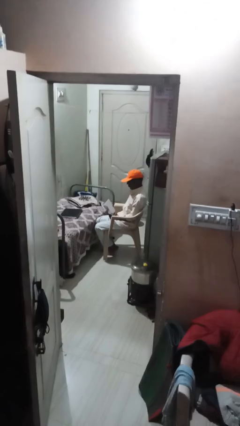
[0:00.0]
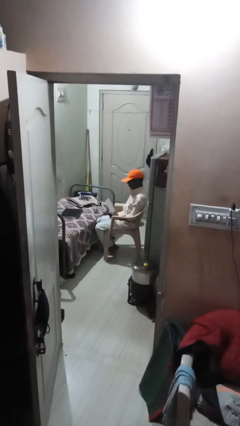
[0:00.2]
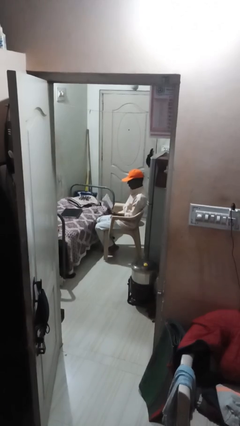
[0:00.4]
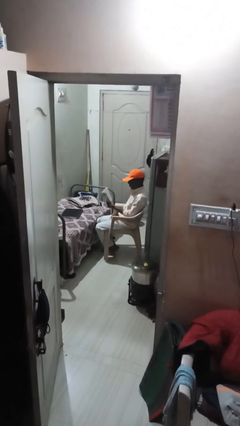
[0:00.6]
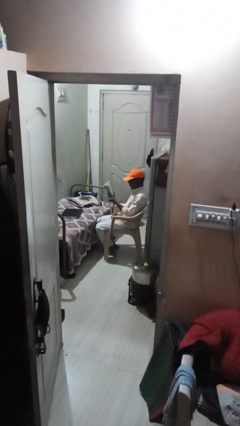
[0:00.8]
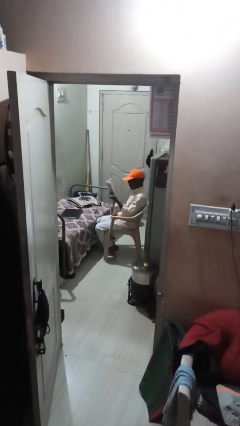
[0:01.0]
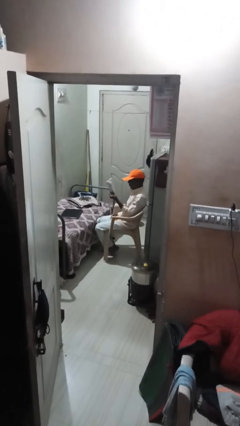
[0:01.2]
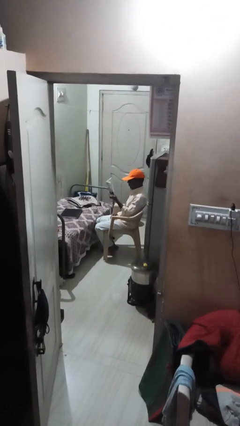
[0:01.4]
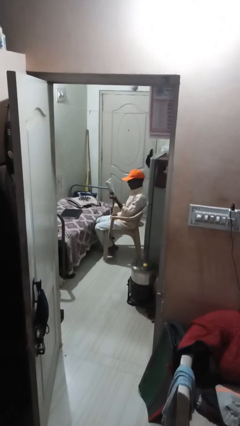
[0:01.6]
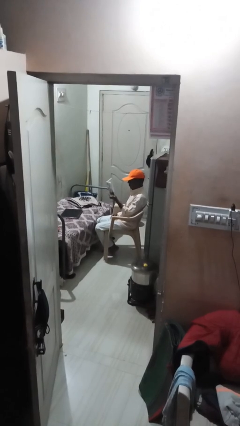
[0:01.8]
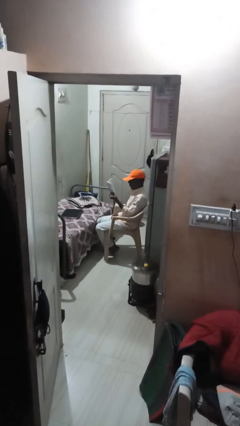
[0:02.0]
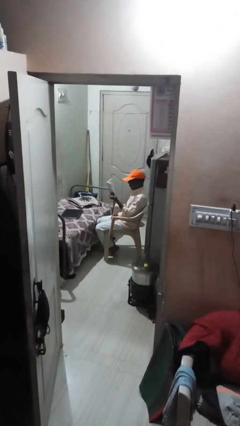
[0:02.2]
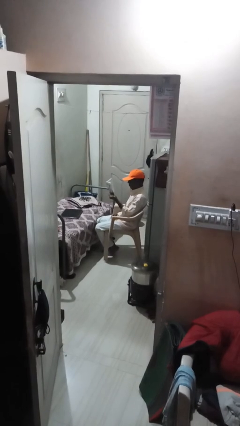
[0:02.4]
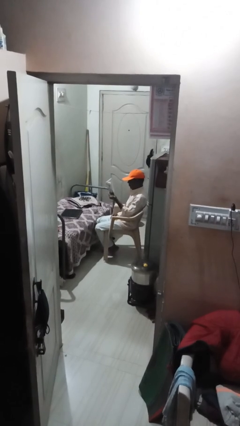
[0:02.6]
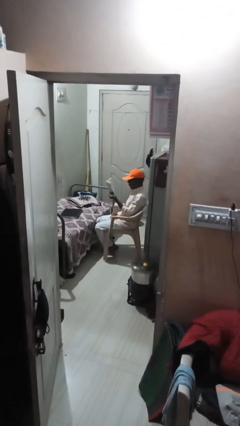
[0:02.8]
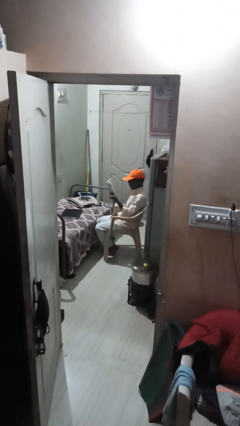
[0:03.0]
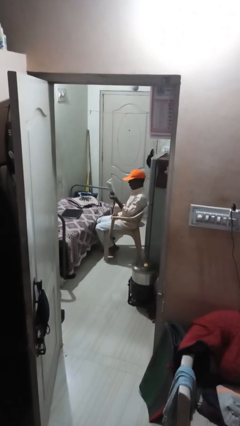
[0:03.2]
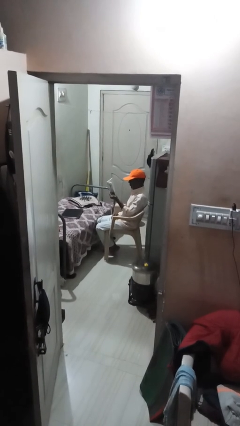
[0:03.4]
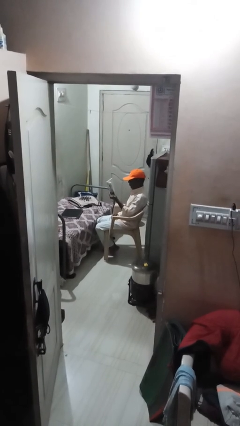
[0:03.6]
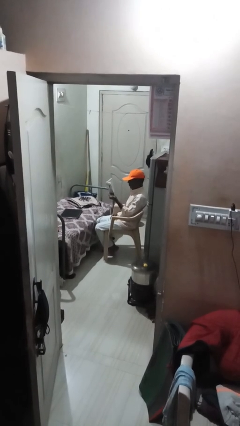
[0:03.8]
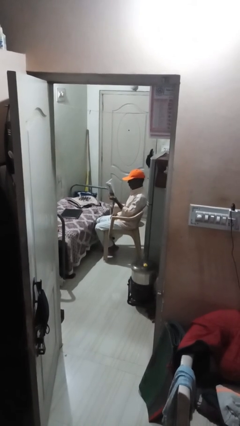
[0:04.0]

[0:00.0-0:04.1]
person reads document

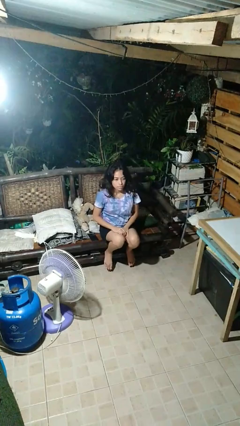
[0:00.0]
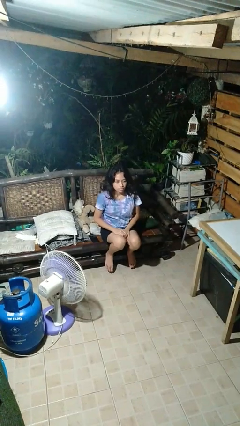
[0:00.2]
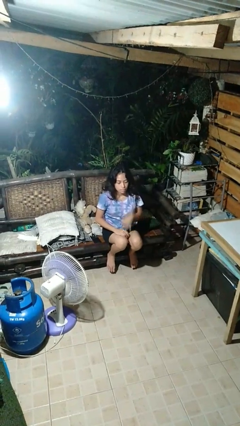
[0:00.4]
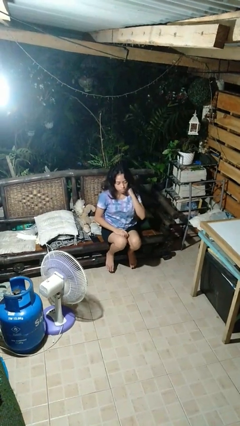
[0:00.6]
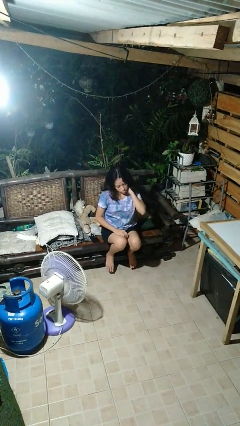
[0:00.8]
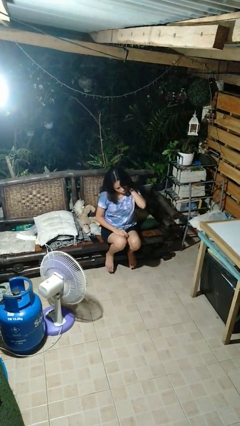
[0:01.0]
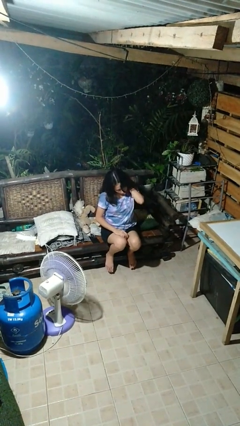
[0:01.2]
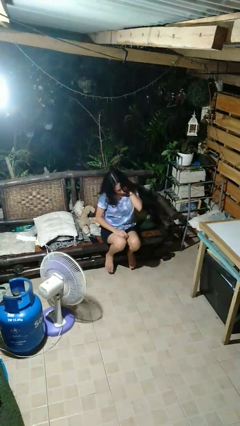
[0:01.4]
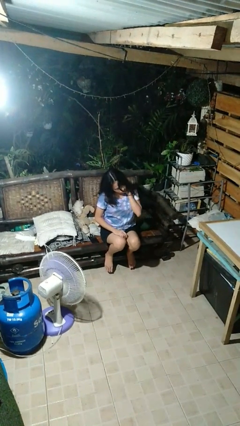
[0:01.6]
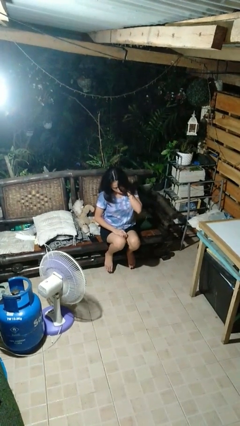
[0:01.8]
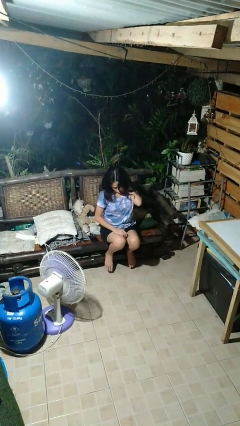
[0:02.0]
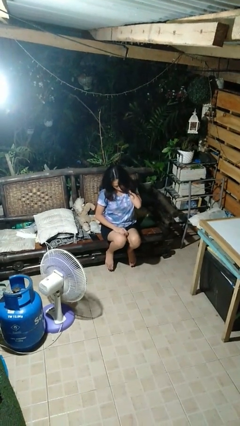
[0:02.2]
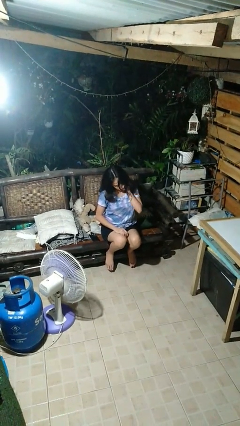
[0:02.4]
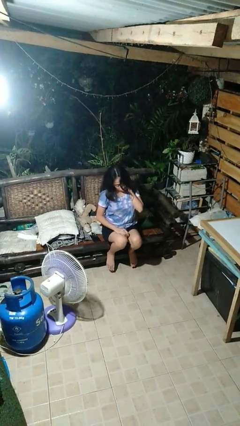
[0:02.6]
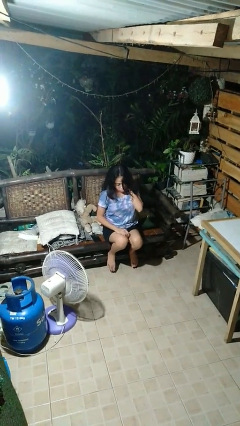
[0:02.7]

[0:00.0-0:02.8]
person rubs neck

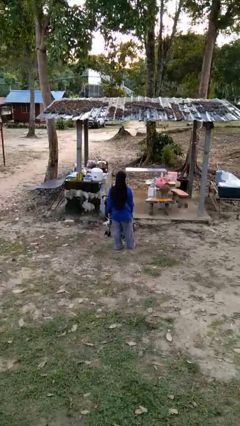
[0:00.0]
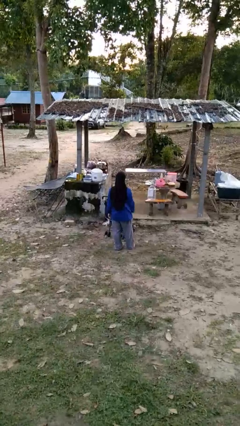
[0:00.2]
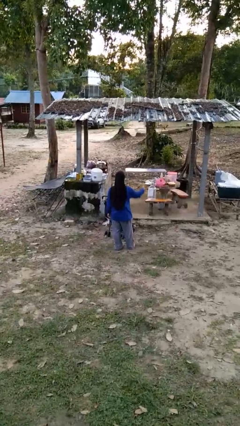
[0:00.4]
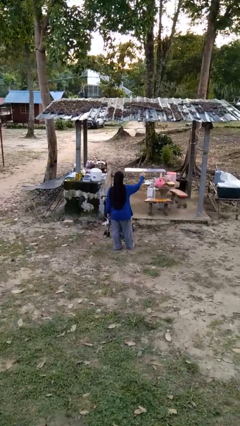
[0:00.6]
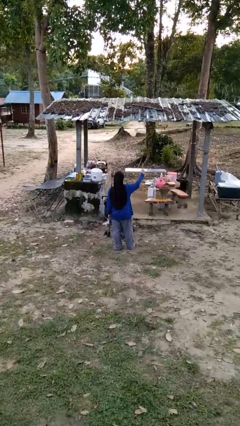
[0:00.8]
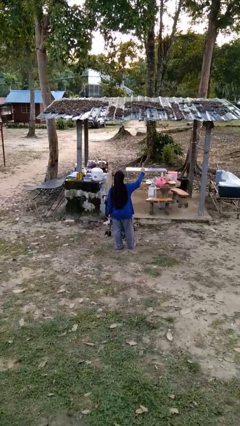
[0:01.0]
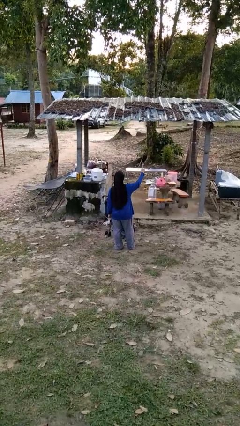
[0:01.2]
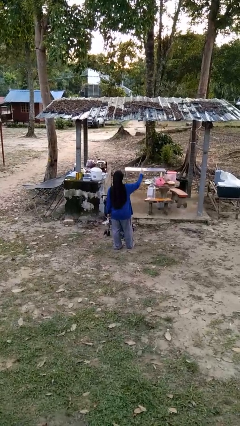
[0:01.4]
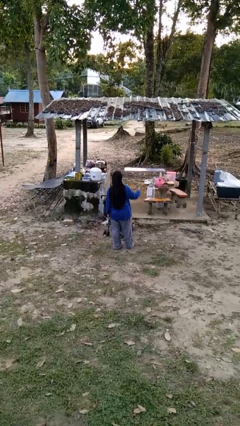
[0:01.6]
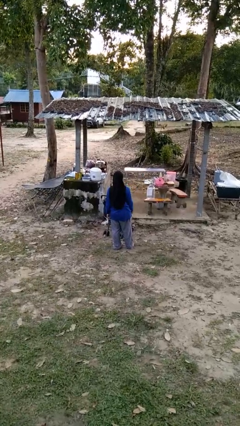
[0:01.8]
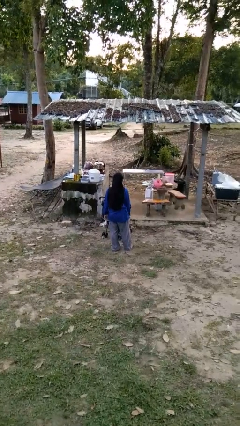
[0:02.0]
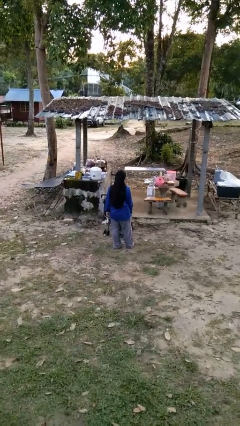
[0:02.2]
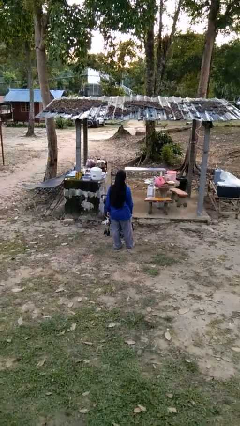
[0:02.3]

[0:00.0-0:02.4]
person gestures number one

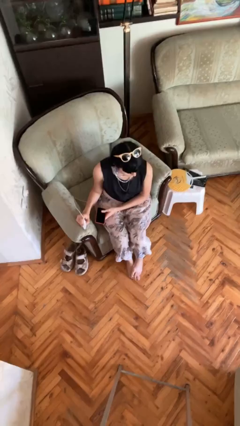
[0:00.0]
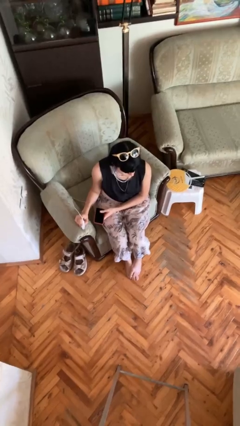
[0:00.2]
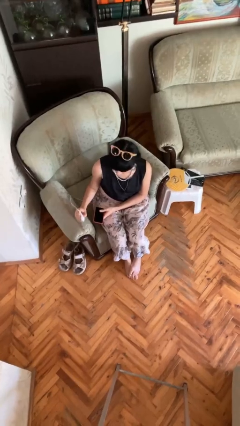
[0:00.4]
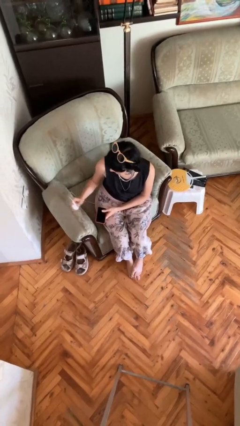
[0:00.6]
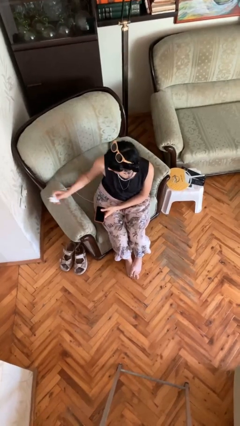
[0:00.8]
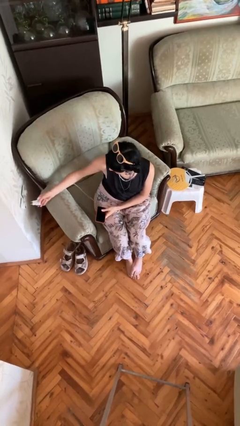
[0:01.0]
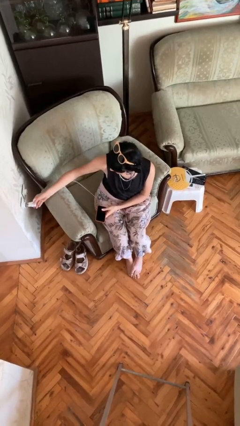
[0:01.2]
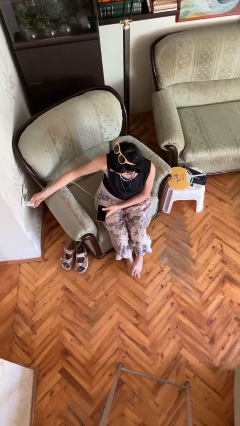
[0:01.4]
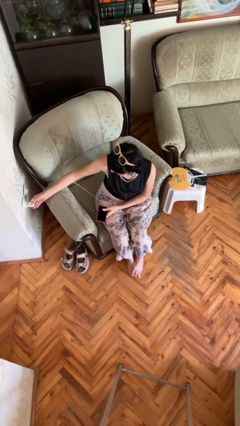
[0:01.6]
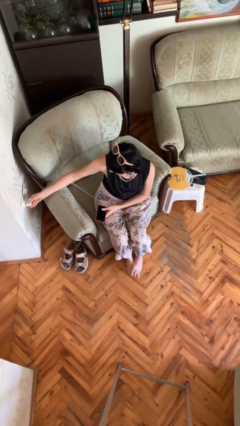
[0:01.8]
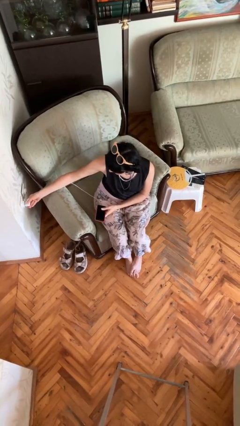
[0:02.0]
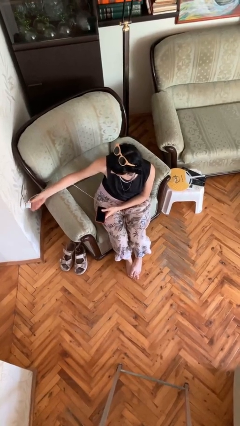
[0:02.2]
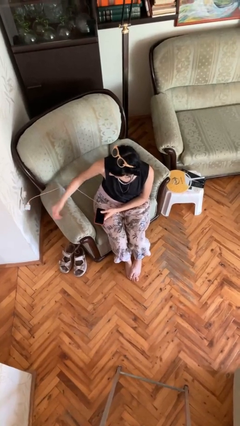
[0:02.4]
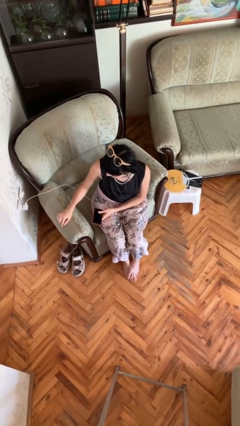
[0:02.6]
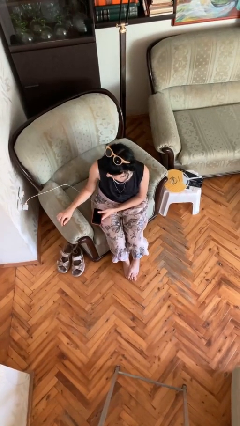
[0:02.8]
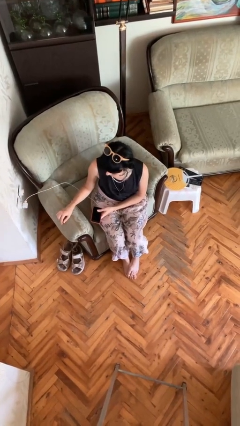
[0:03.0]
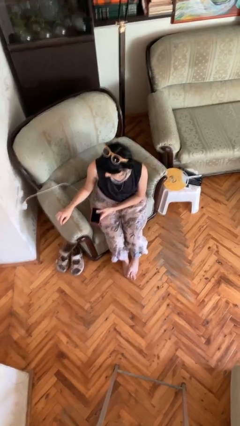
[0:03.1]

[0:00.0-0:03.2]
person plugs into electrical socket

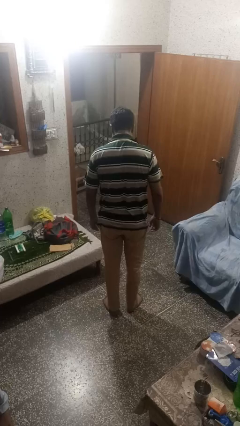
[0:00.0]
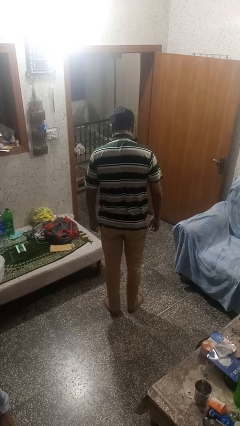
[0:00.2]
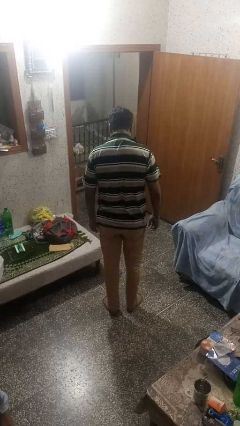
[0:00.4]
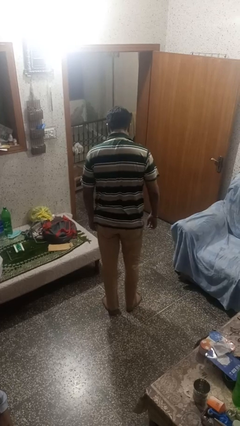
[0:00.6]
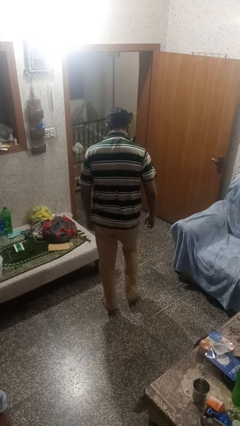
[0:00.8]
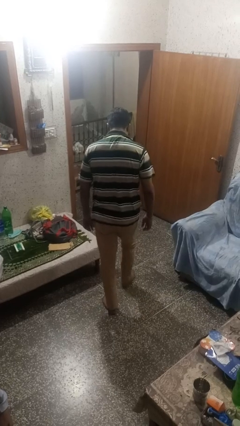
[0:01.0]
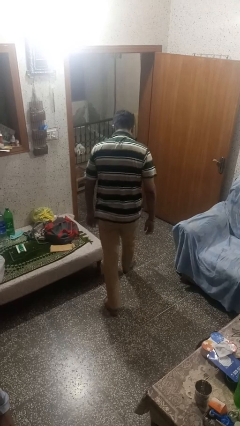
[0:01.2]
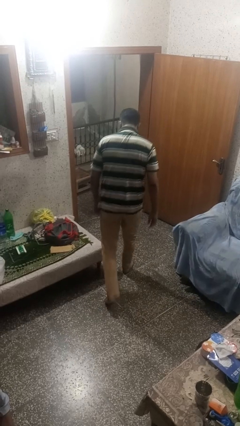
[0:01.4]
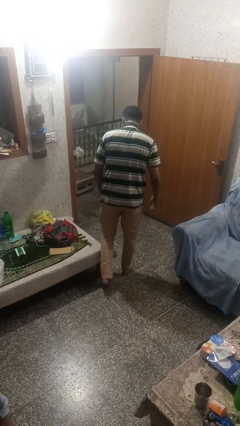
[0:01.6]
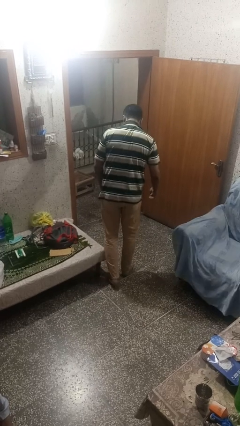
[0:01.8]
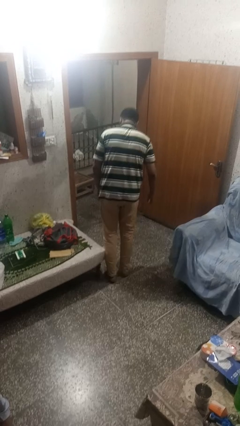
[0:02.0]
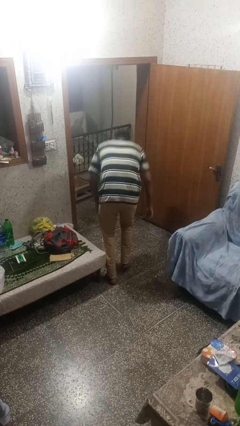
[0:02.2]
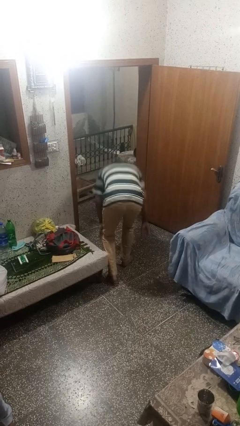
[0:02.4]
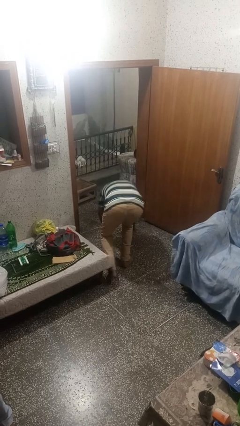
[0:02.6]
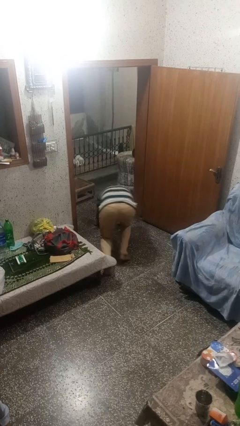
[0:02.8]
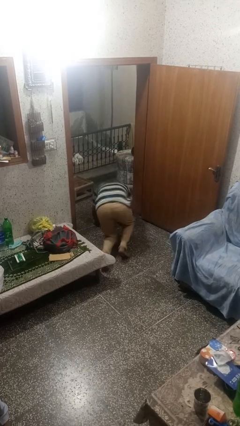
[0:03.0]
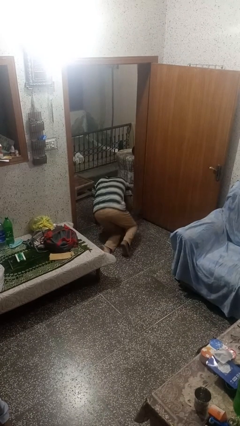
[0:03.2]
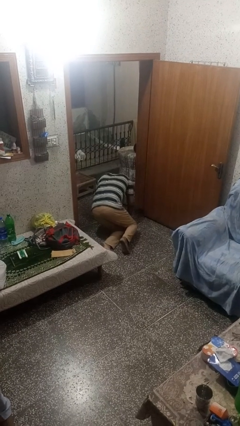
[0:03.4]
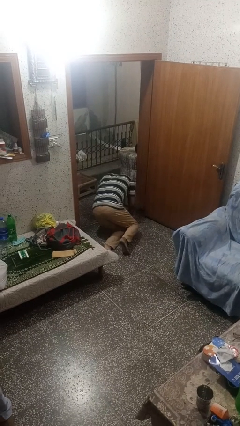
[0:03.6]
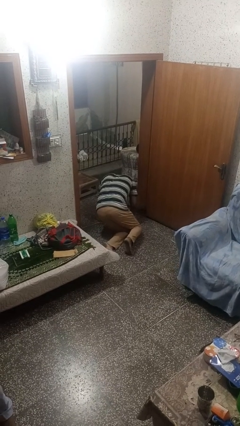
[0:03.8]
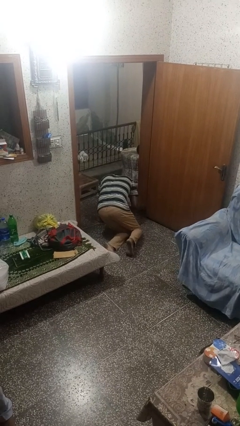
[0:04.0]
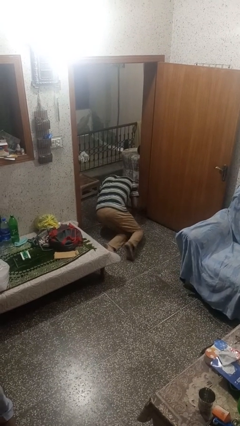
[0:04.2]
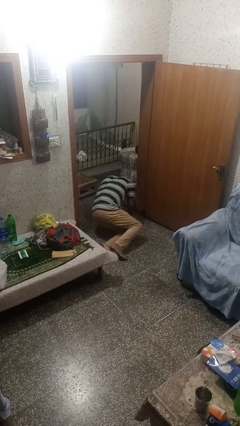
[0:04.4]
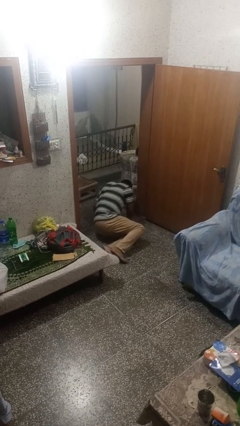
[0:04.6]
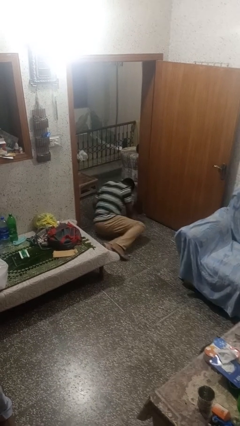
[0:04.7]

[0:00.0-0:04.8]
person trips on object on floor
